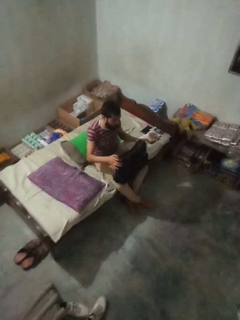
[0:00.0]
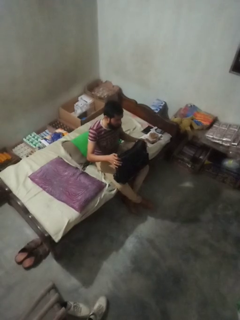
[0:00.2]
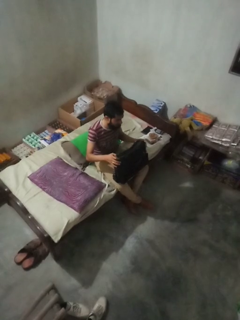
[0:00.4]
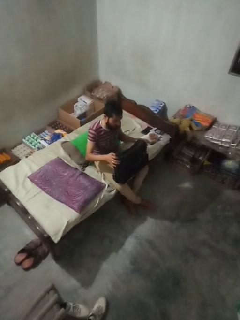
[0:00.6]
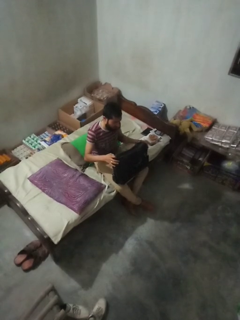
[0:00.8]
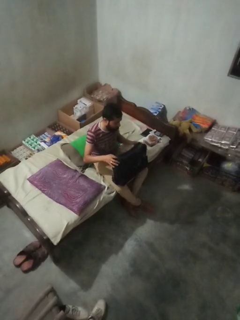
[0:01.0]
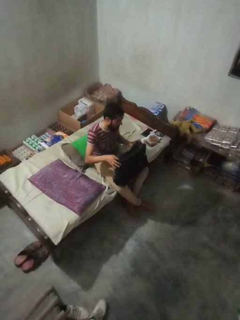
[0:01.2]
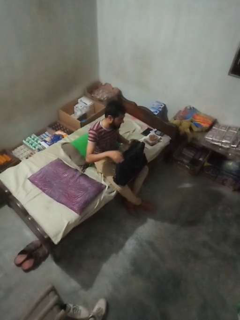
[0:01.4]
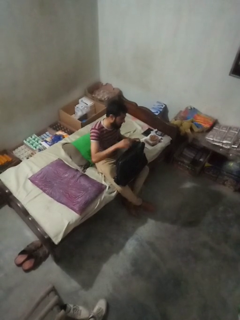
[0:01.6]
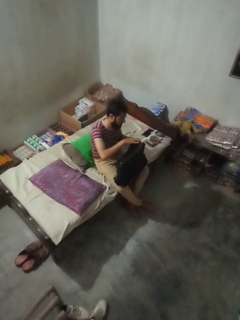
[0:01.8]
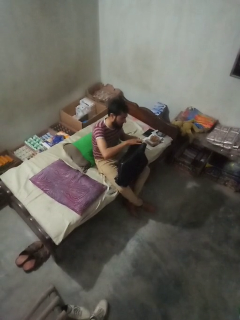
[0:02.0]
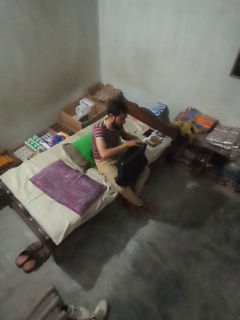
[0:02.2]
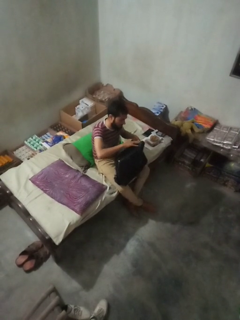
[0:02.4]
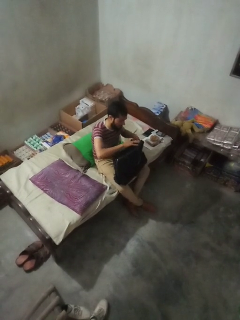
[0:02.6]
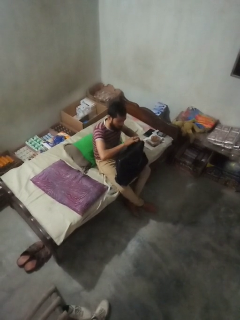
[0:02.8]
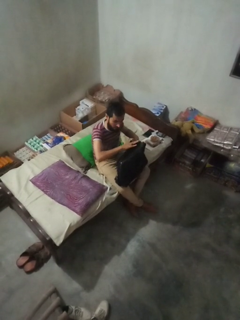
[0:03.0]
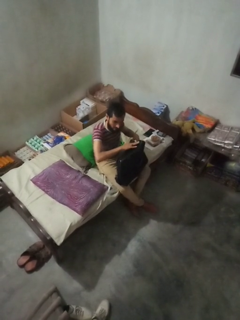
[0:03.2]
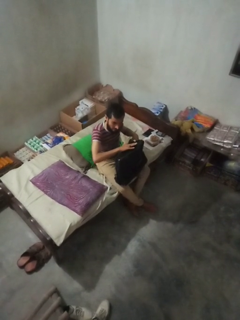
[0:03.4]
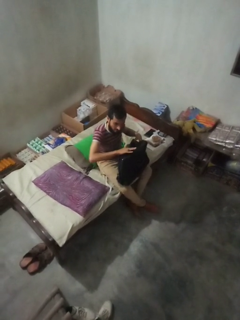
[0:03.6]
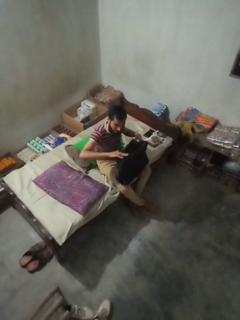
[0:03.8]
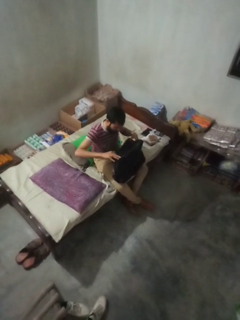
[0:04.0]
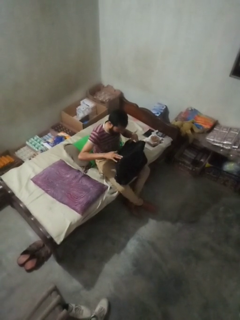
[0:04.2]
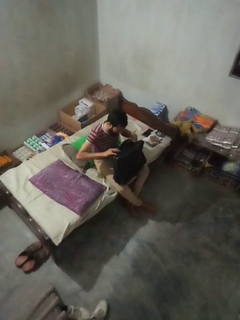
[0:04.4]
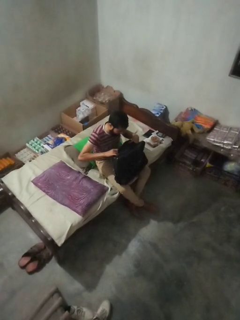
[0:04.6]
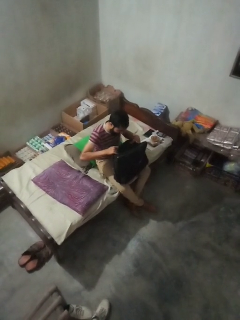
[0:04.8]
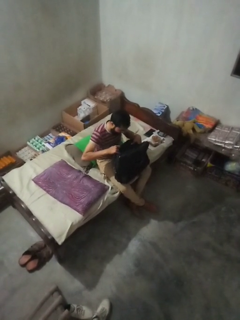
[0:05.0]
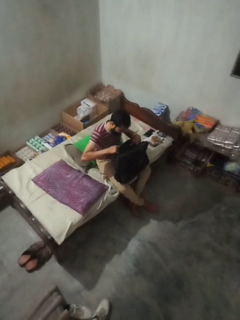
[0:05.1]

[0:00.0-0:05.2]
person searches in bag

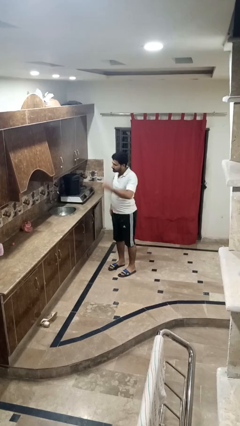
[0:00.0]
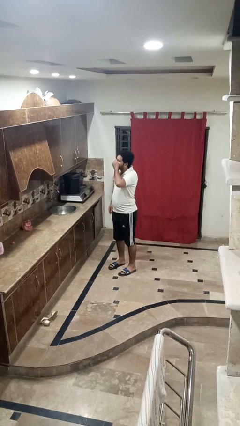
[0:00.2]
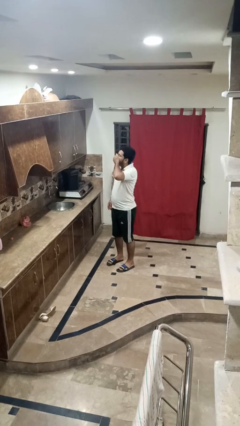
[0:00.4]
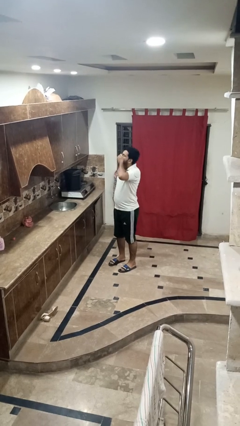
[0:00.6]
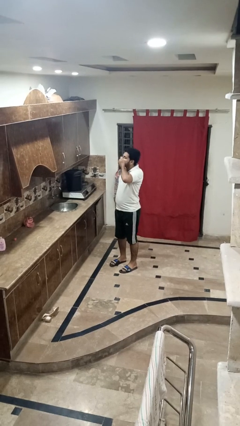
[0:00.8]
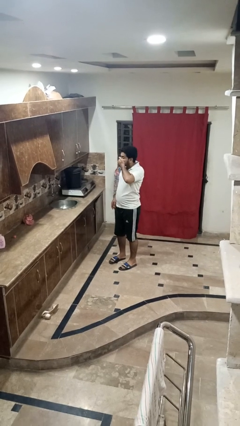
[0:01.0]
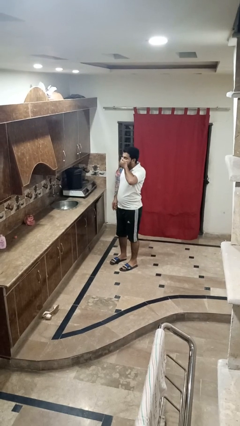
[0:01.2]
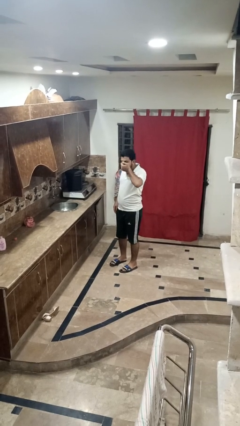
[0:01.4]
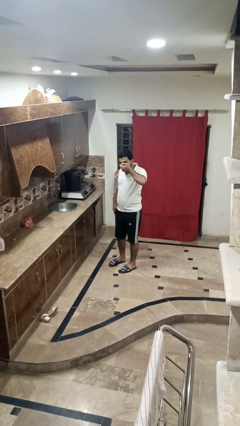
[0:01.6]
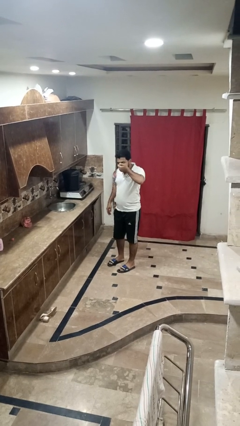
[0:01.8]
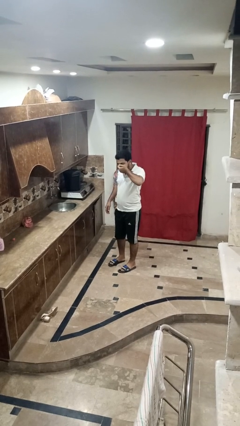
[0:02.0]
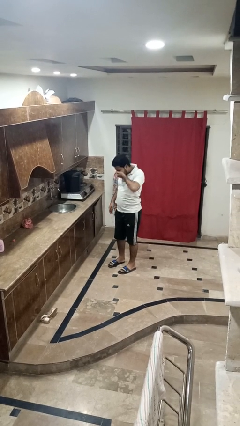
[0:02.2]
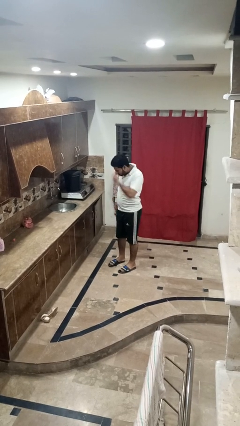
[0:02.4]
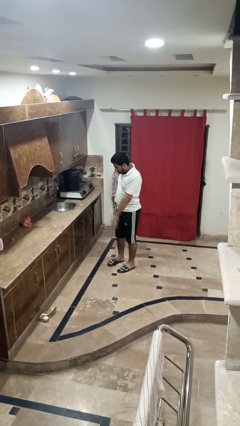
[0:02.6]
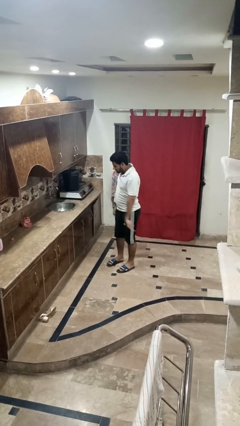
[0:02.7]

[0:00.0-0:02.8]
person sneezes into hand

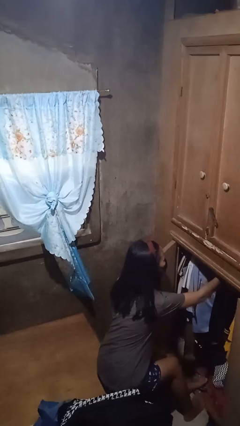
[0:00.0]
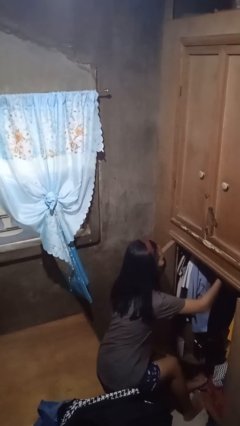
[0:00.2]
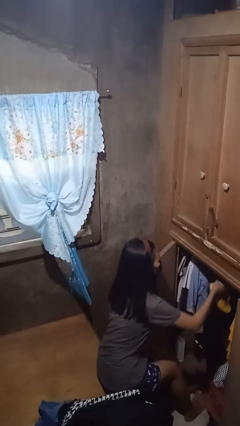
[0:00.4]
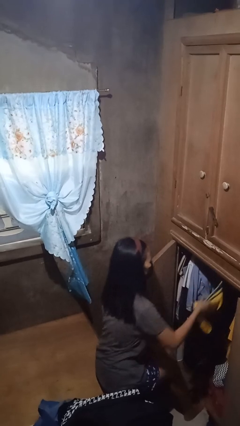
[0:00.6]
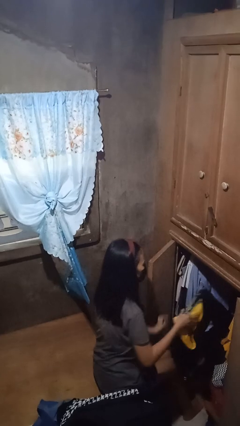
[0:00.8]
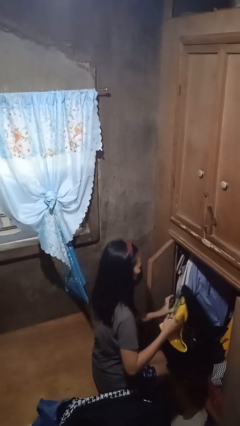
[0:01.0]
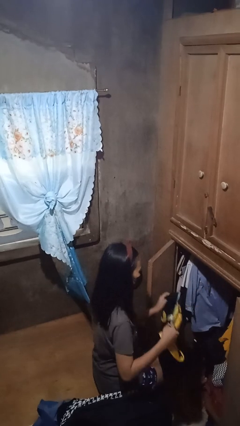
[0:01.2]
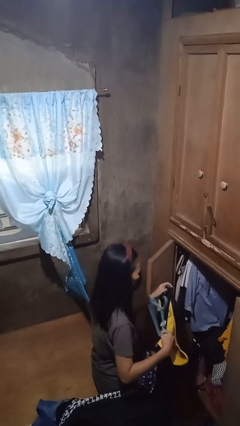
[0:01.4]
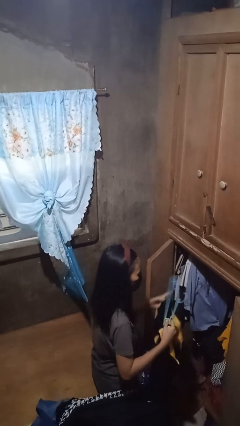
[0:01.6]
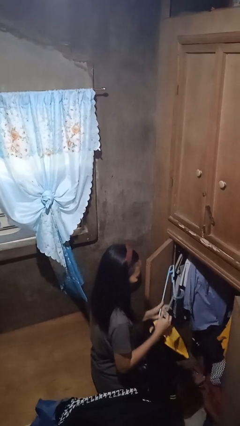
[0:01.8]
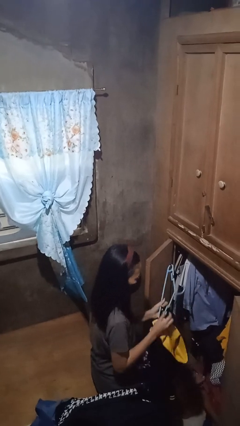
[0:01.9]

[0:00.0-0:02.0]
person takes clothes from closet

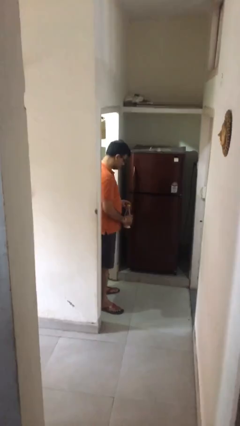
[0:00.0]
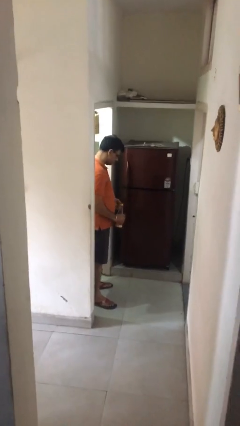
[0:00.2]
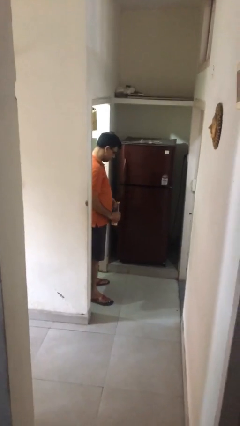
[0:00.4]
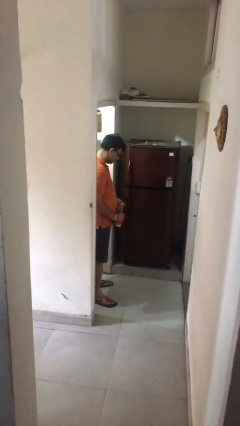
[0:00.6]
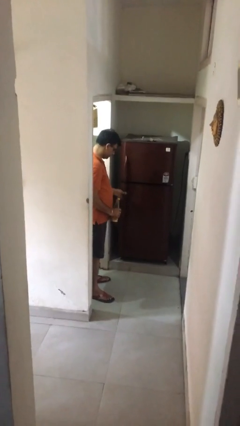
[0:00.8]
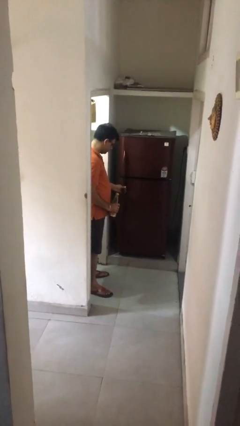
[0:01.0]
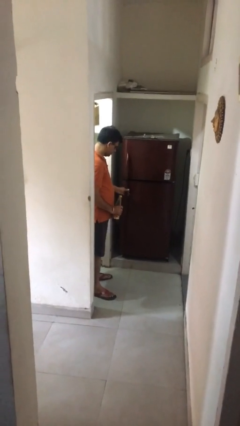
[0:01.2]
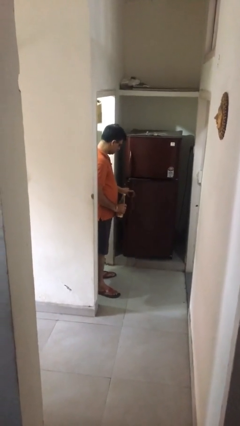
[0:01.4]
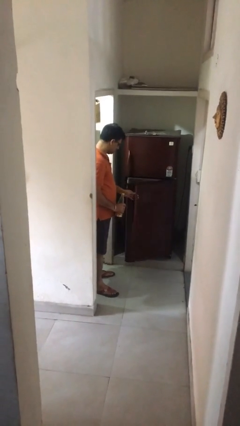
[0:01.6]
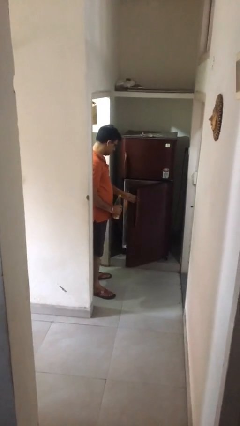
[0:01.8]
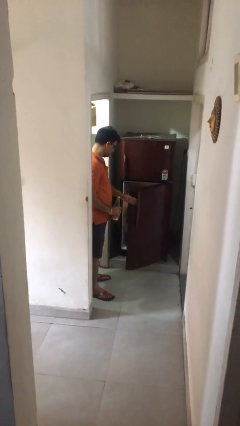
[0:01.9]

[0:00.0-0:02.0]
person opens refrigerator

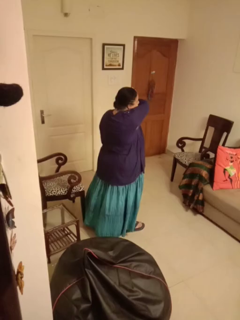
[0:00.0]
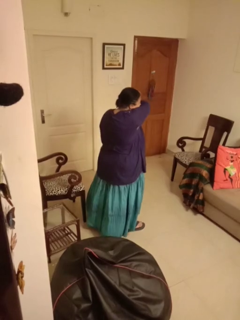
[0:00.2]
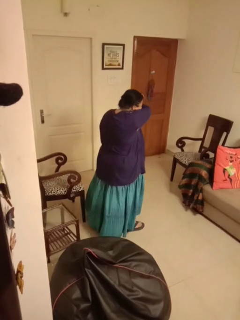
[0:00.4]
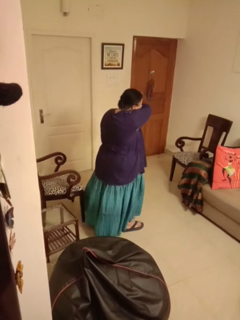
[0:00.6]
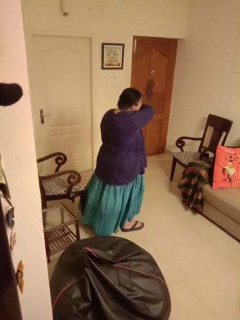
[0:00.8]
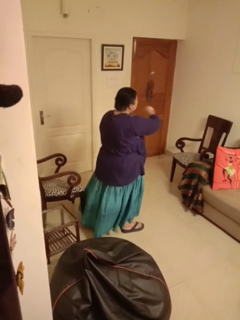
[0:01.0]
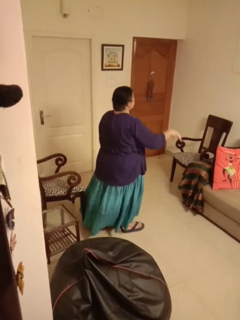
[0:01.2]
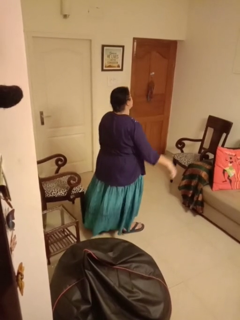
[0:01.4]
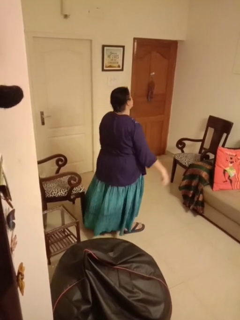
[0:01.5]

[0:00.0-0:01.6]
person sneezes into arm

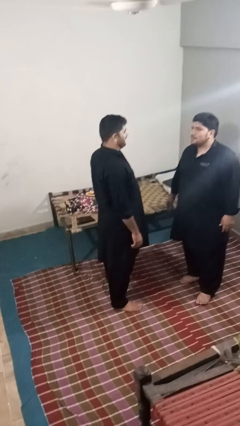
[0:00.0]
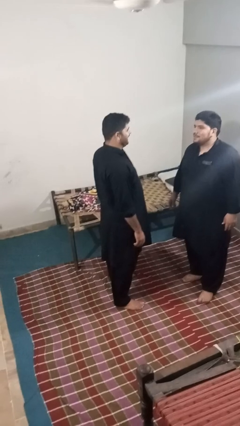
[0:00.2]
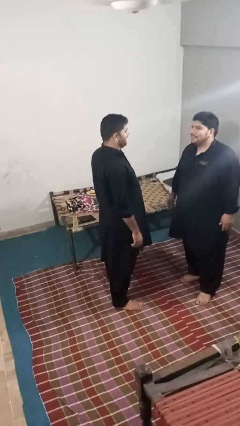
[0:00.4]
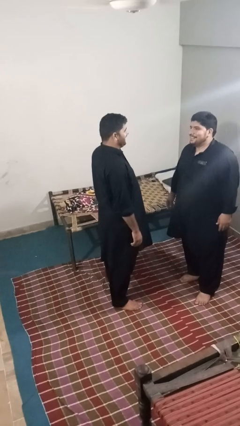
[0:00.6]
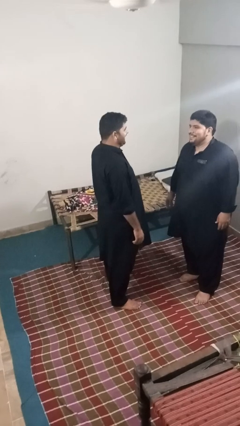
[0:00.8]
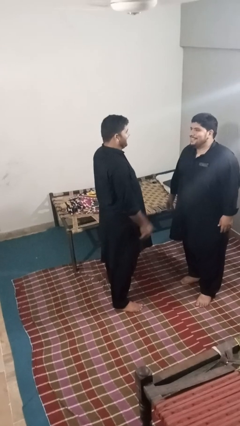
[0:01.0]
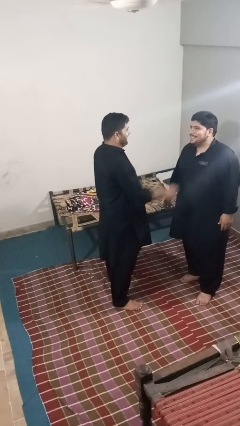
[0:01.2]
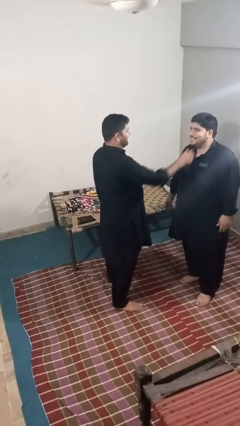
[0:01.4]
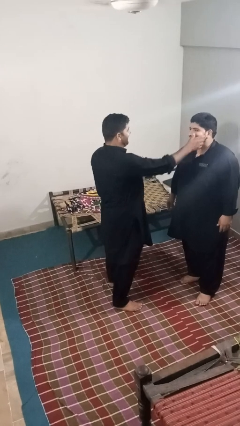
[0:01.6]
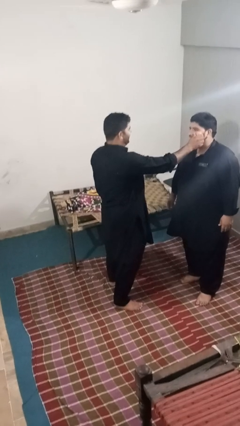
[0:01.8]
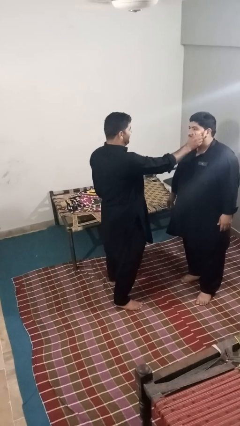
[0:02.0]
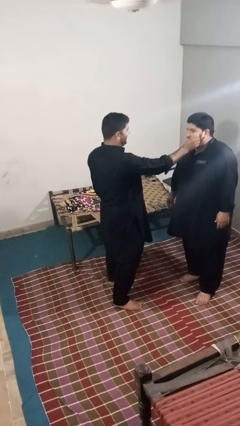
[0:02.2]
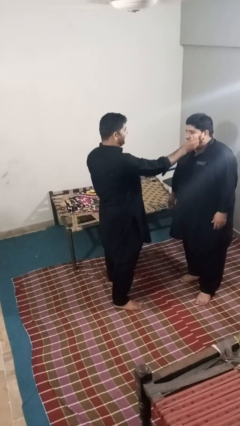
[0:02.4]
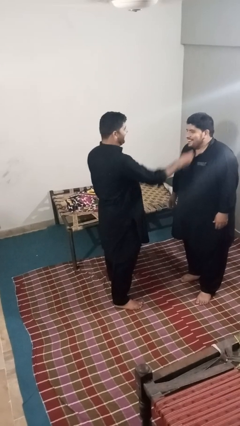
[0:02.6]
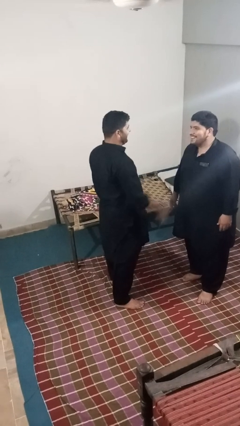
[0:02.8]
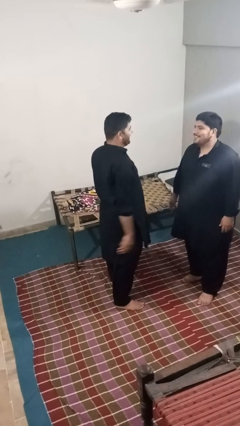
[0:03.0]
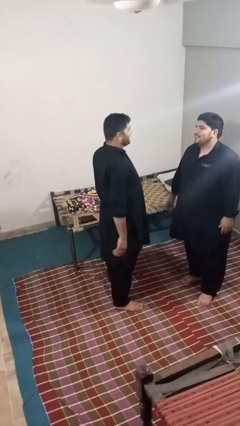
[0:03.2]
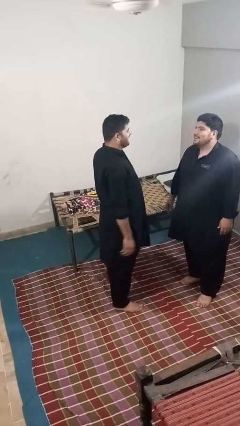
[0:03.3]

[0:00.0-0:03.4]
person touches face of person

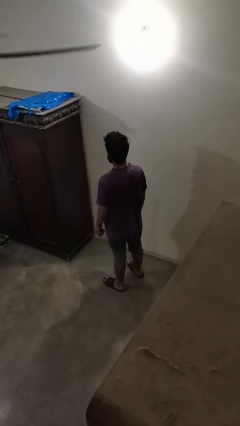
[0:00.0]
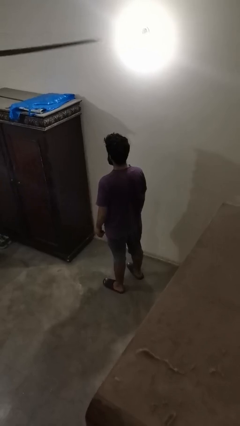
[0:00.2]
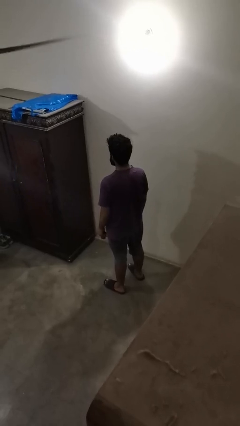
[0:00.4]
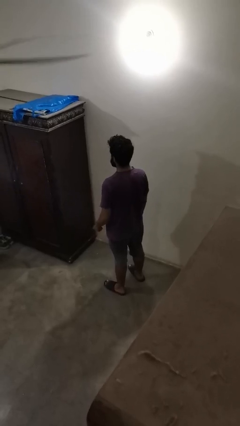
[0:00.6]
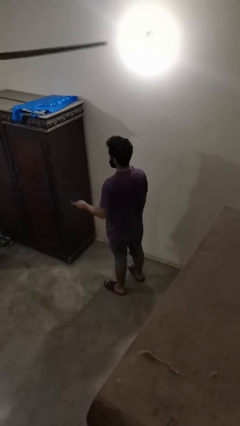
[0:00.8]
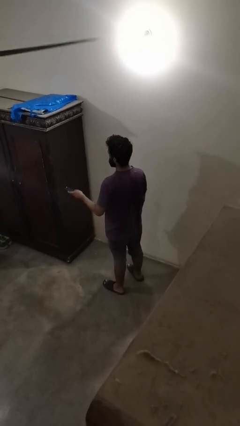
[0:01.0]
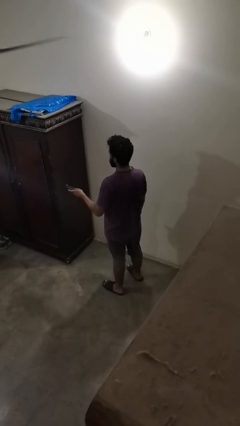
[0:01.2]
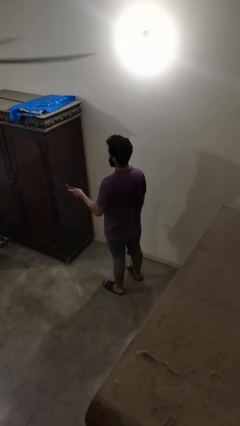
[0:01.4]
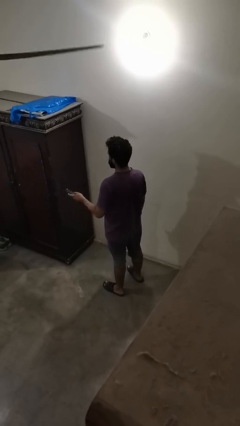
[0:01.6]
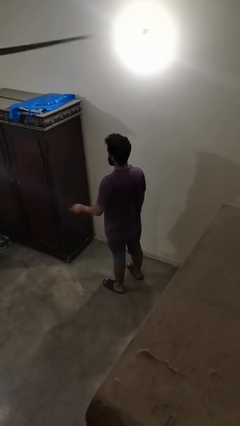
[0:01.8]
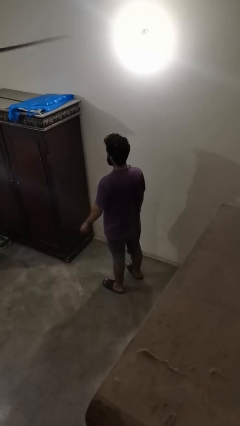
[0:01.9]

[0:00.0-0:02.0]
person uses television remote

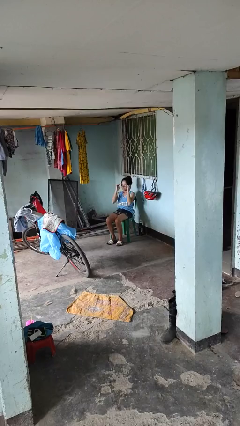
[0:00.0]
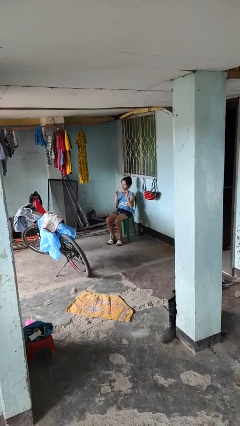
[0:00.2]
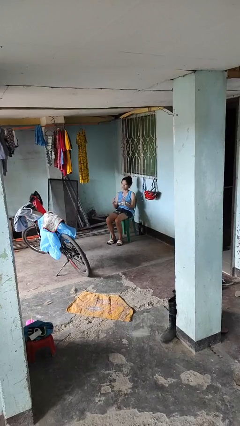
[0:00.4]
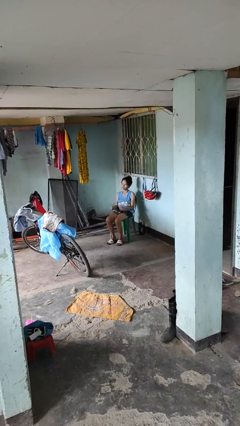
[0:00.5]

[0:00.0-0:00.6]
person takes off glasses
